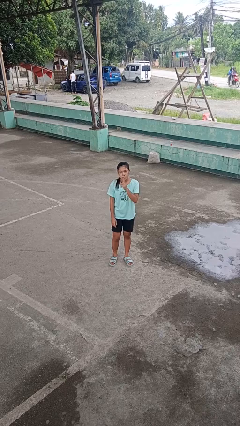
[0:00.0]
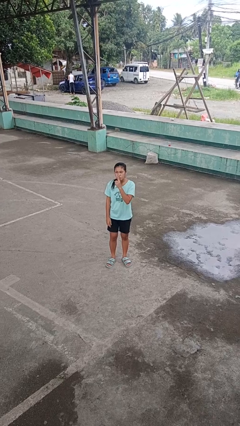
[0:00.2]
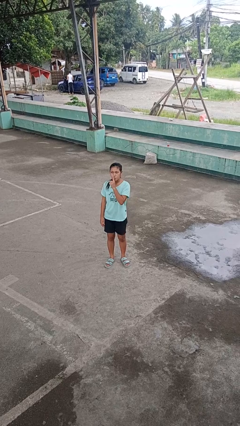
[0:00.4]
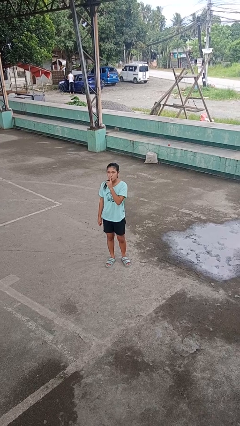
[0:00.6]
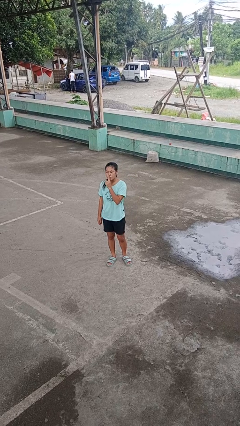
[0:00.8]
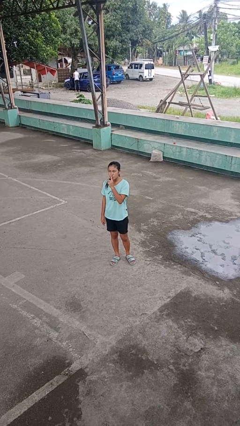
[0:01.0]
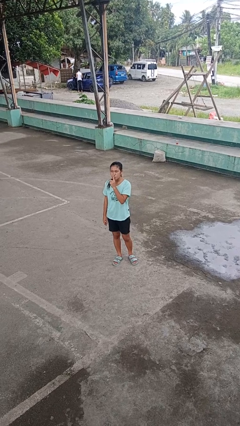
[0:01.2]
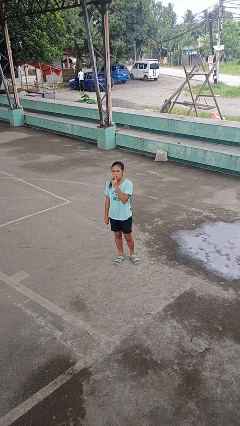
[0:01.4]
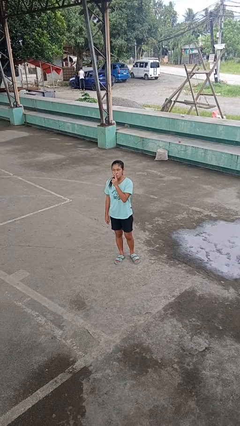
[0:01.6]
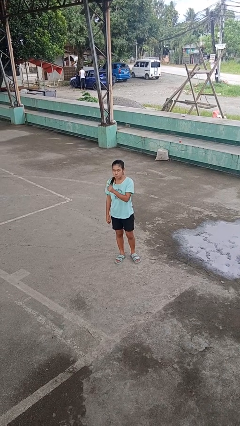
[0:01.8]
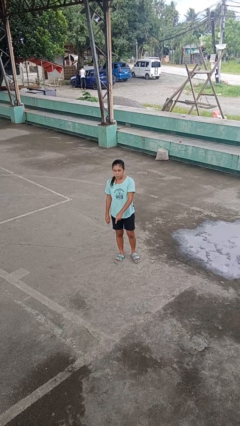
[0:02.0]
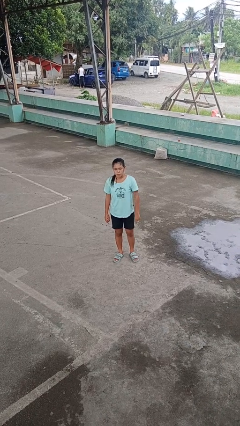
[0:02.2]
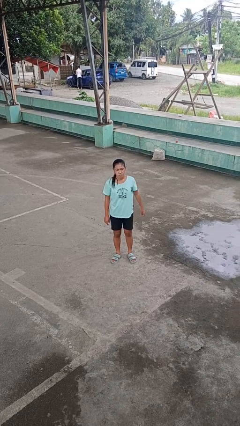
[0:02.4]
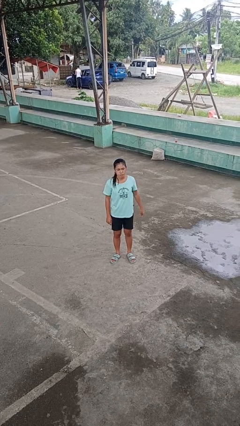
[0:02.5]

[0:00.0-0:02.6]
person gestures be quiet

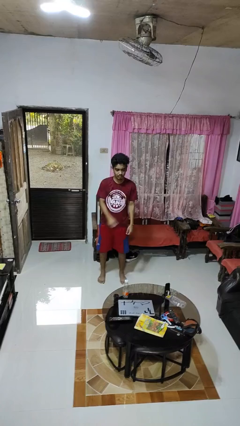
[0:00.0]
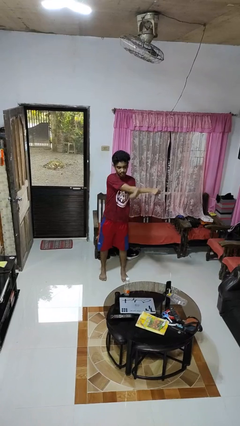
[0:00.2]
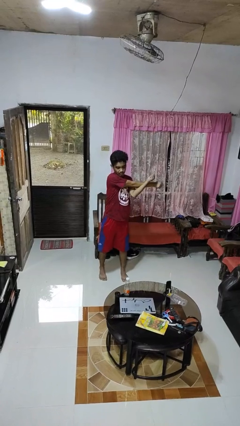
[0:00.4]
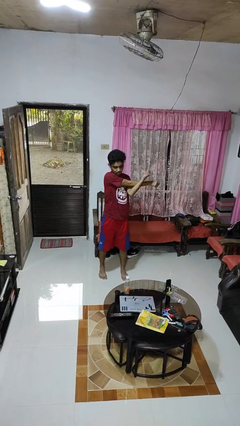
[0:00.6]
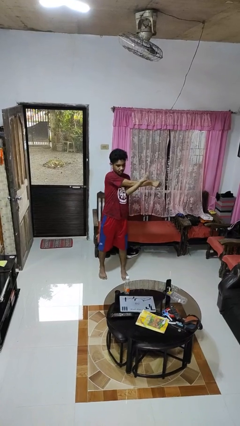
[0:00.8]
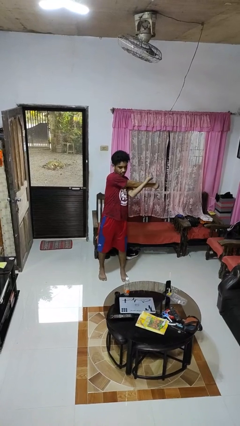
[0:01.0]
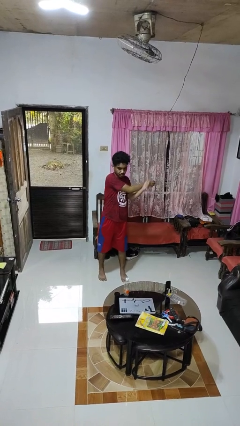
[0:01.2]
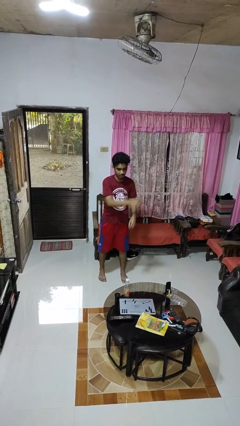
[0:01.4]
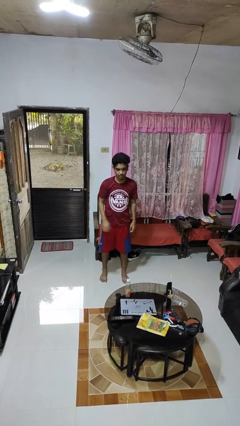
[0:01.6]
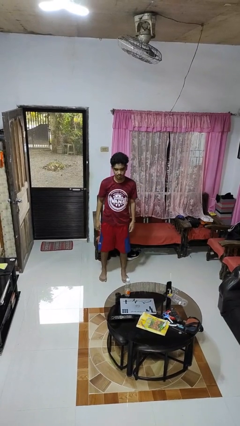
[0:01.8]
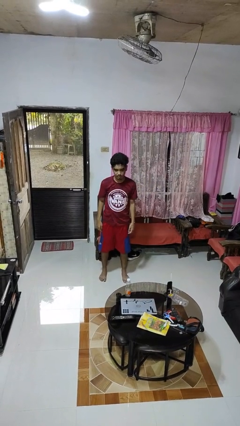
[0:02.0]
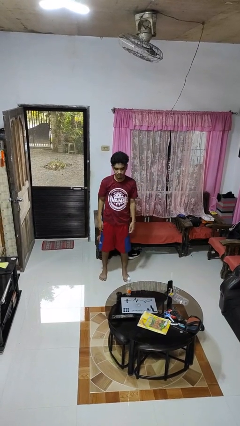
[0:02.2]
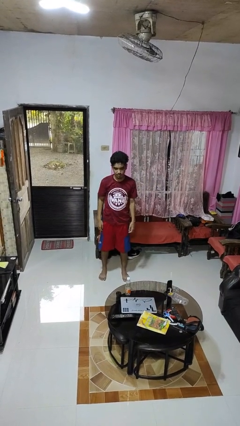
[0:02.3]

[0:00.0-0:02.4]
person stretches arms to side

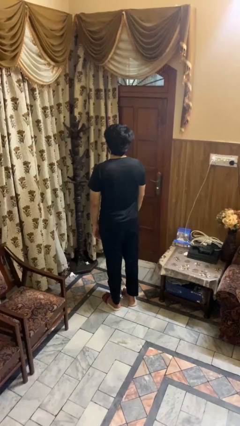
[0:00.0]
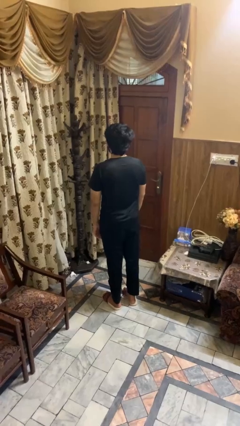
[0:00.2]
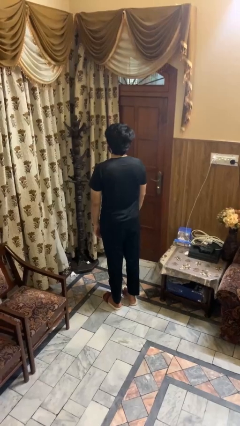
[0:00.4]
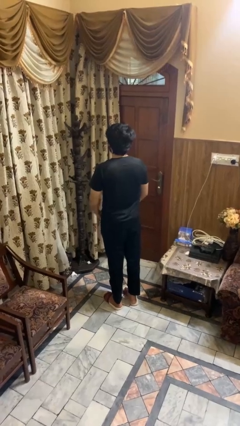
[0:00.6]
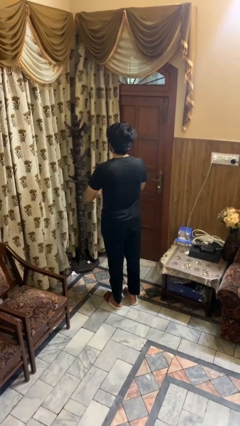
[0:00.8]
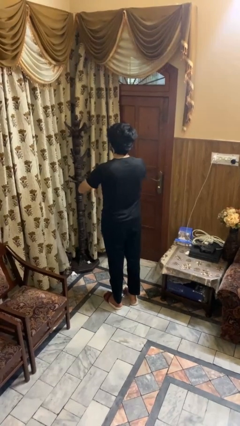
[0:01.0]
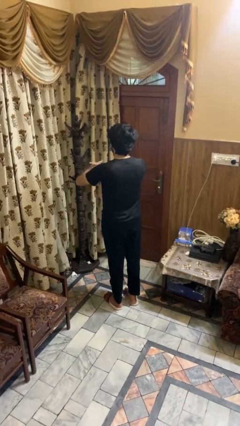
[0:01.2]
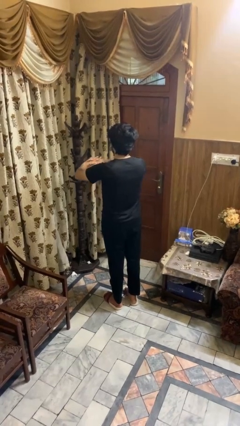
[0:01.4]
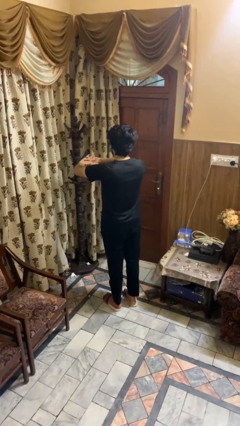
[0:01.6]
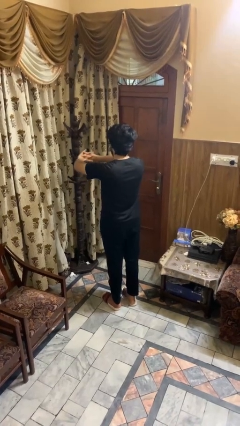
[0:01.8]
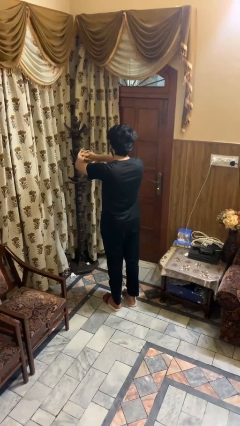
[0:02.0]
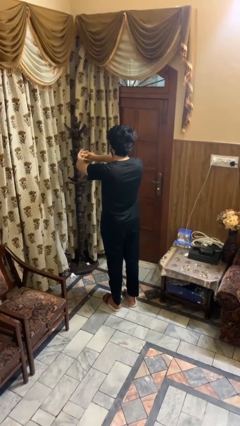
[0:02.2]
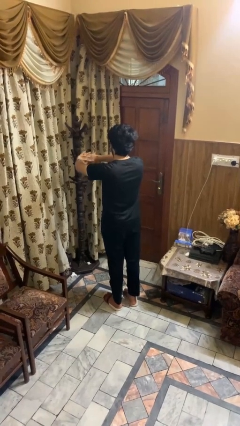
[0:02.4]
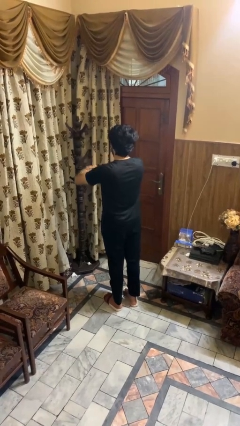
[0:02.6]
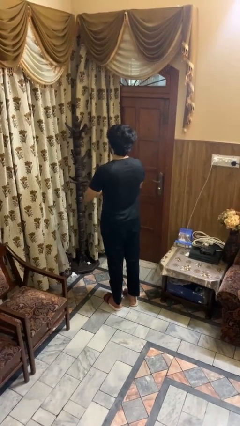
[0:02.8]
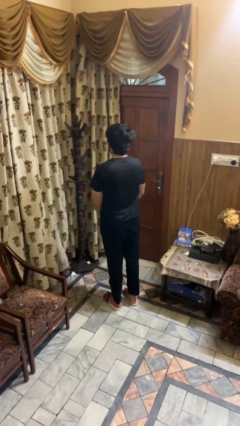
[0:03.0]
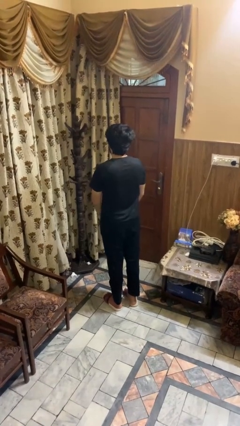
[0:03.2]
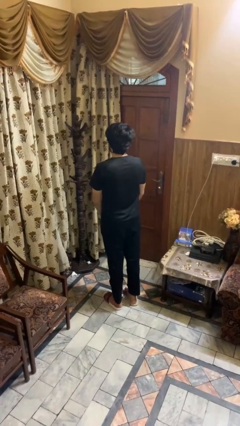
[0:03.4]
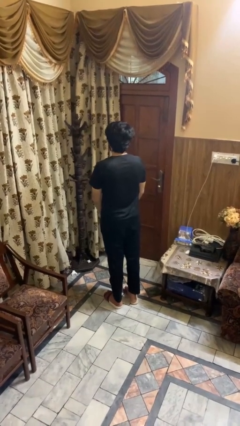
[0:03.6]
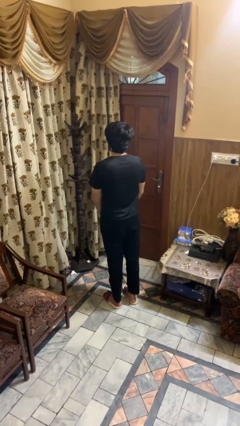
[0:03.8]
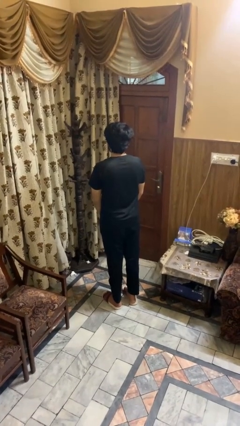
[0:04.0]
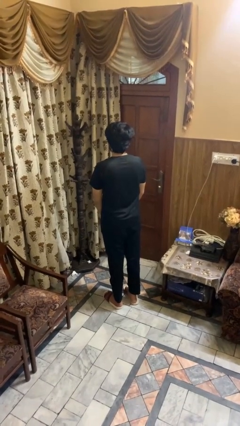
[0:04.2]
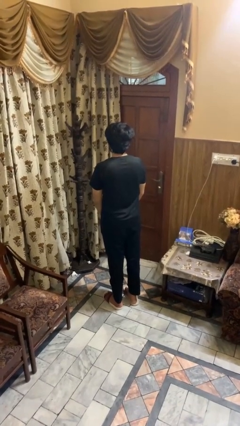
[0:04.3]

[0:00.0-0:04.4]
person cracks knuckles

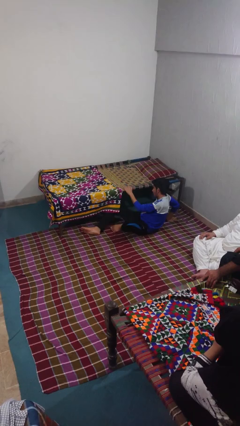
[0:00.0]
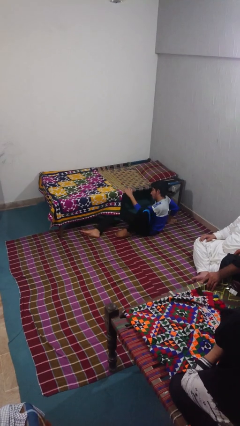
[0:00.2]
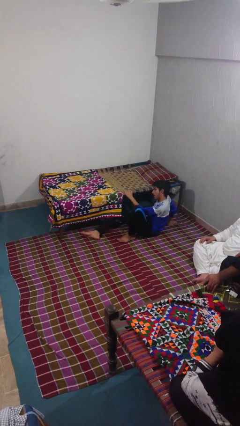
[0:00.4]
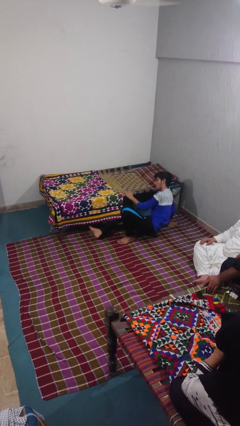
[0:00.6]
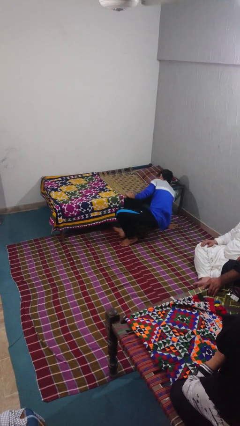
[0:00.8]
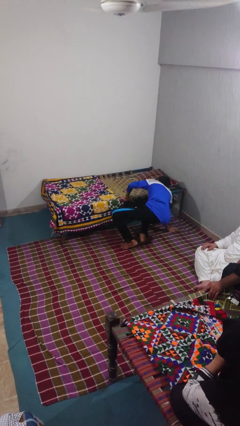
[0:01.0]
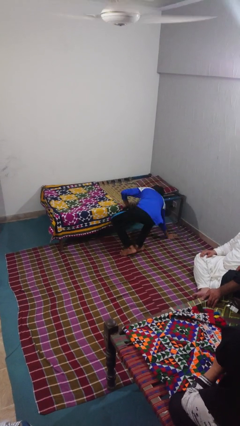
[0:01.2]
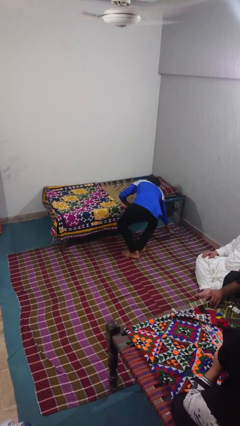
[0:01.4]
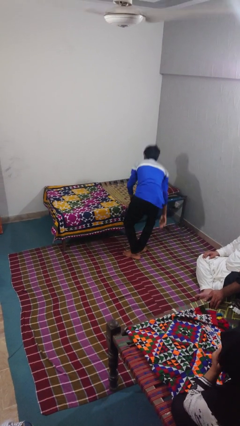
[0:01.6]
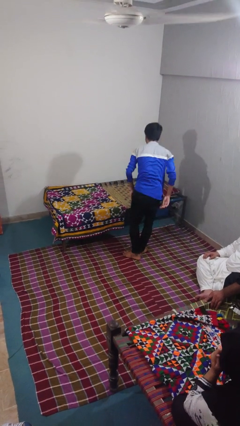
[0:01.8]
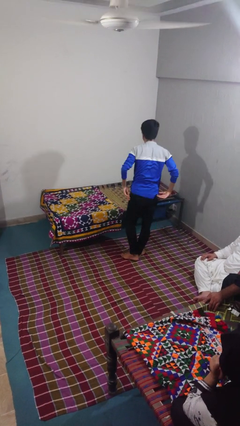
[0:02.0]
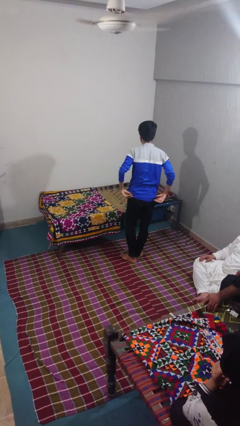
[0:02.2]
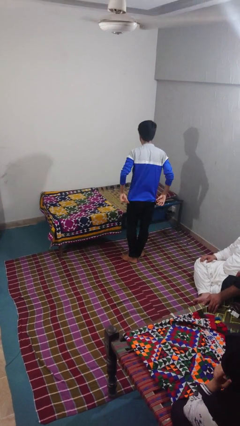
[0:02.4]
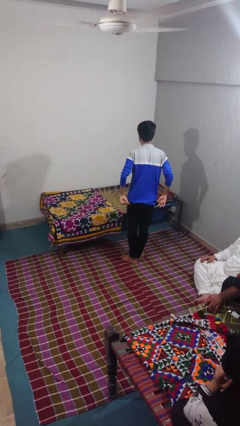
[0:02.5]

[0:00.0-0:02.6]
person stands up from floor

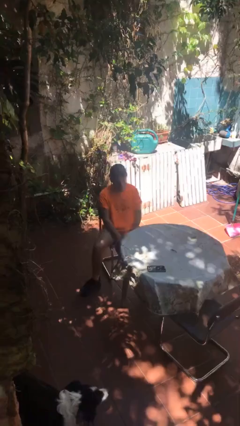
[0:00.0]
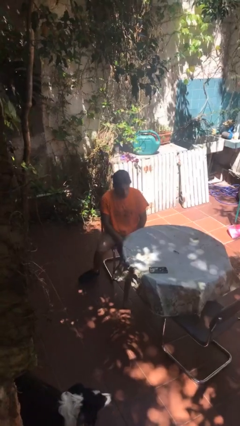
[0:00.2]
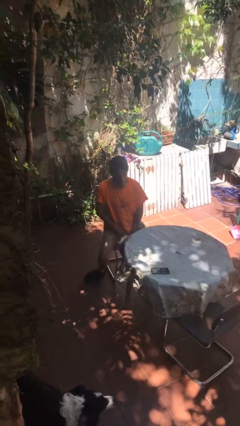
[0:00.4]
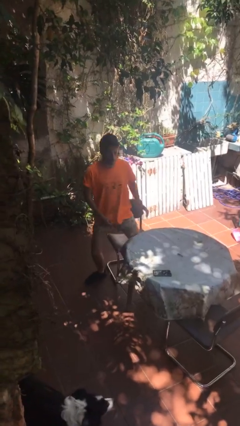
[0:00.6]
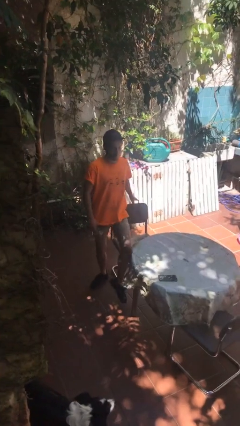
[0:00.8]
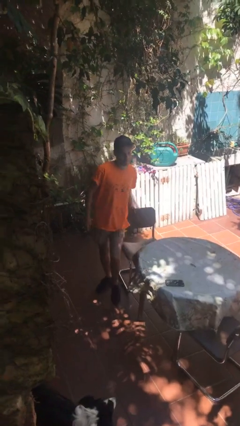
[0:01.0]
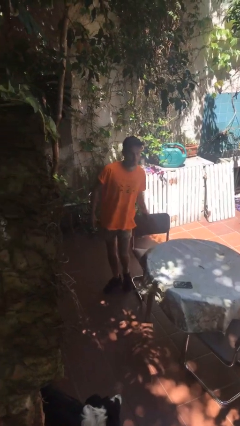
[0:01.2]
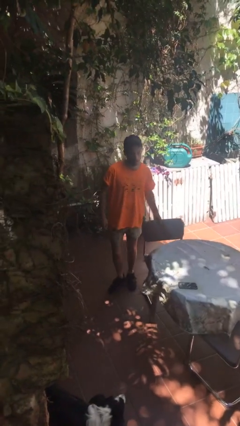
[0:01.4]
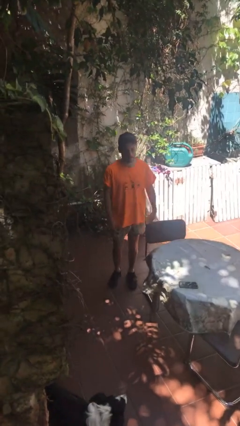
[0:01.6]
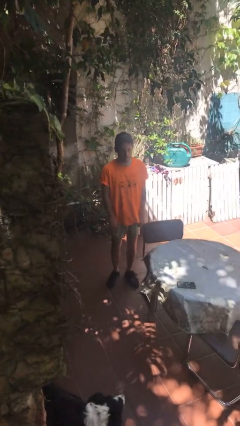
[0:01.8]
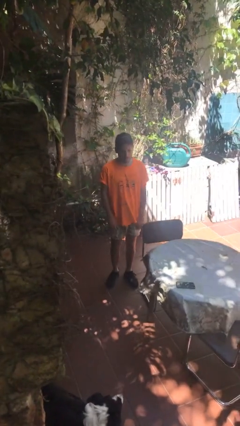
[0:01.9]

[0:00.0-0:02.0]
person stands up

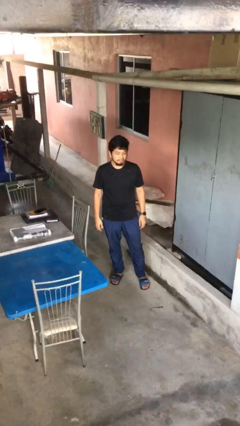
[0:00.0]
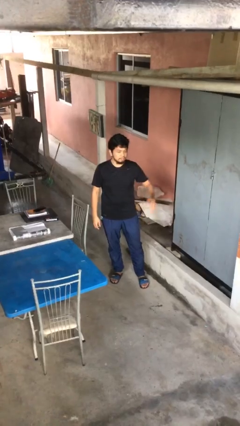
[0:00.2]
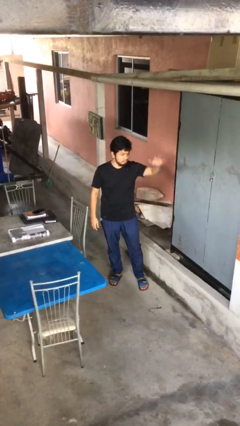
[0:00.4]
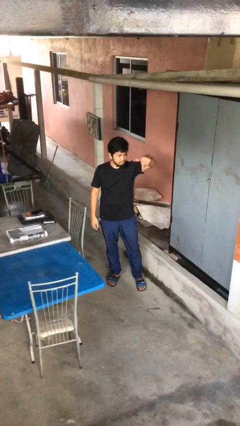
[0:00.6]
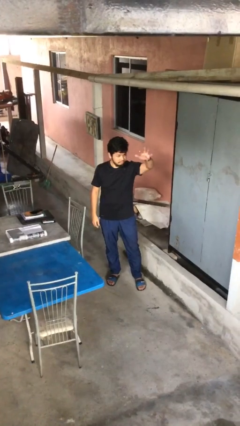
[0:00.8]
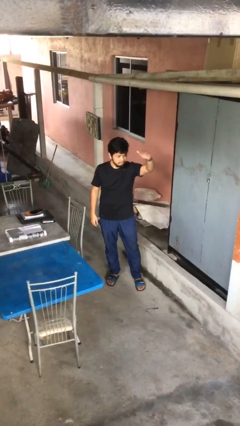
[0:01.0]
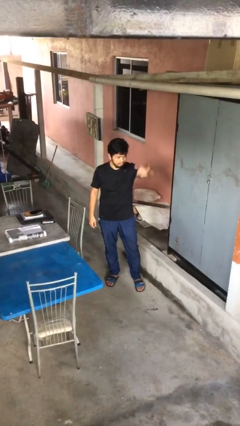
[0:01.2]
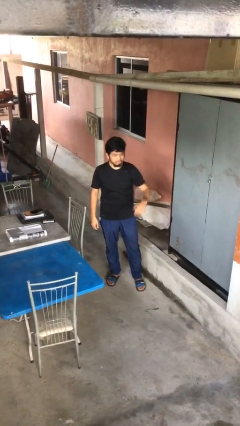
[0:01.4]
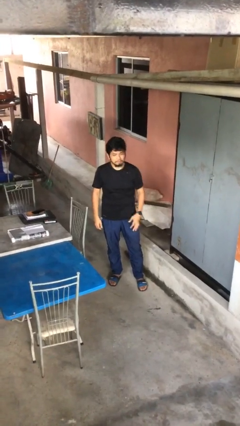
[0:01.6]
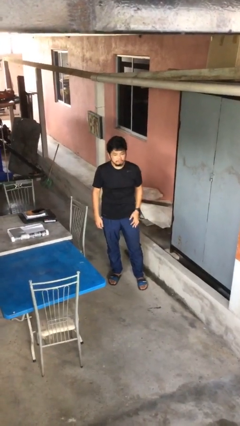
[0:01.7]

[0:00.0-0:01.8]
person gestures come here

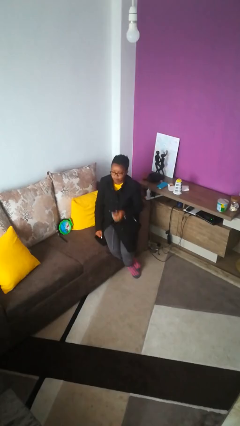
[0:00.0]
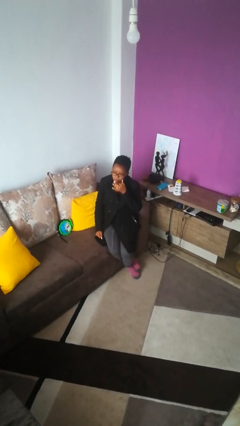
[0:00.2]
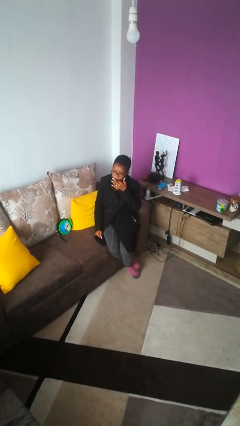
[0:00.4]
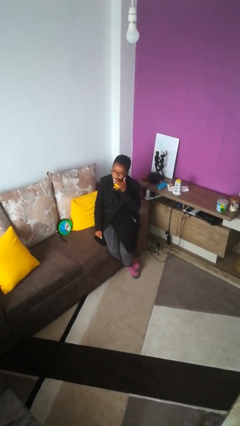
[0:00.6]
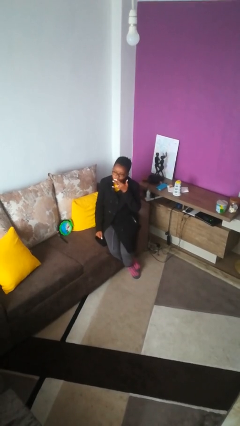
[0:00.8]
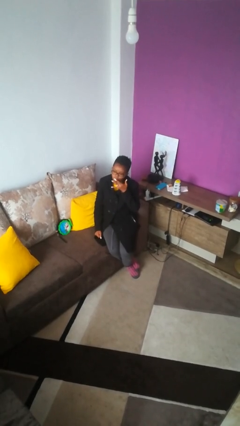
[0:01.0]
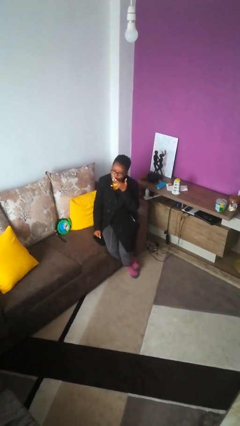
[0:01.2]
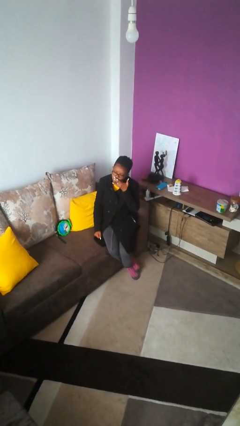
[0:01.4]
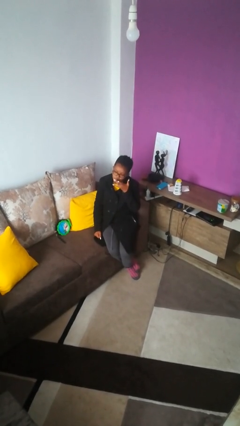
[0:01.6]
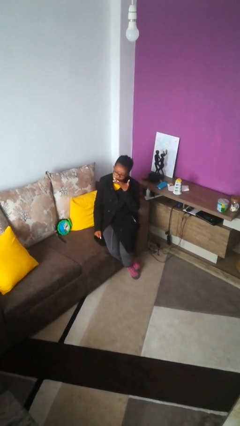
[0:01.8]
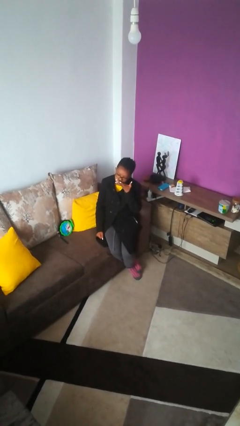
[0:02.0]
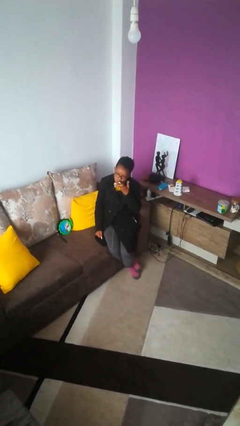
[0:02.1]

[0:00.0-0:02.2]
person licks fingers
